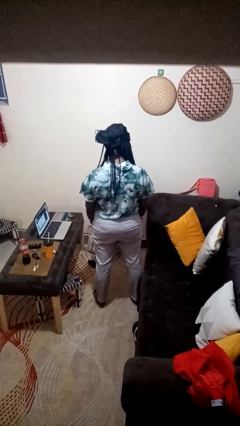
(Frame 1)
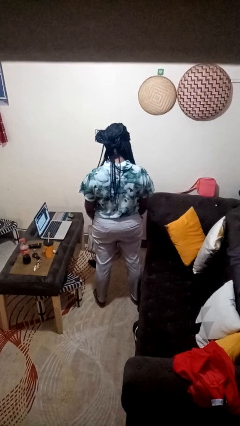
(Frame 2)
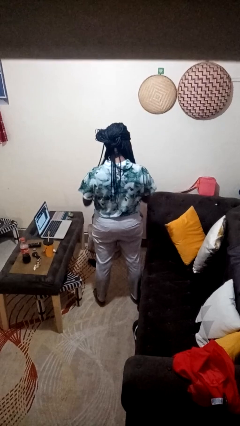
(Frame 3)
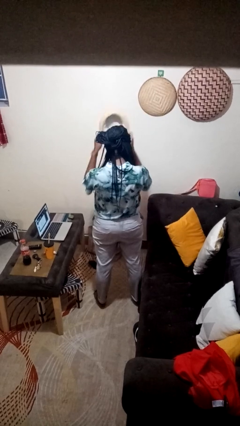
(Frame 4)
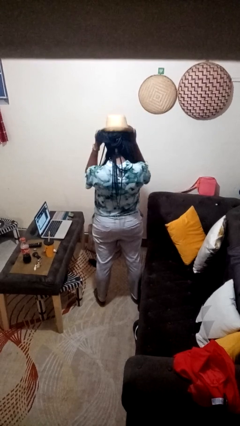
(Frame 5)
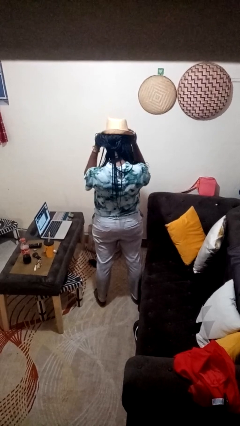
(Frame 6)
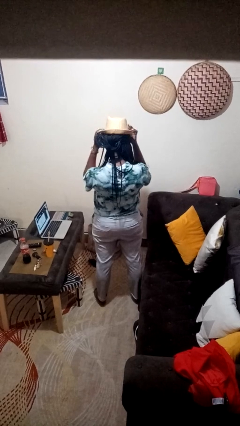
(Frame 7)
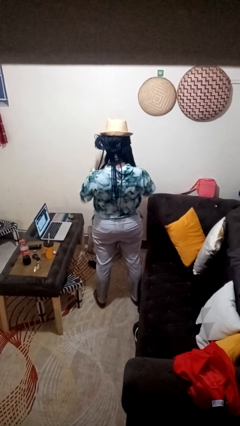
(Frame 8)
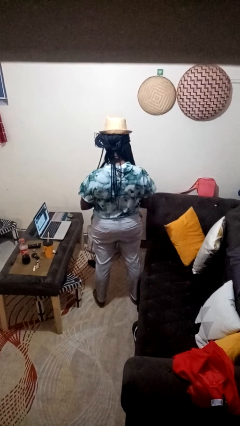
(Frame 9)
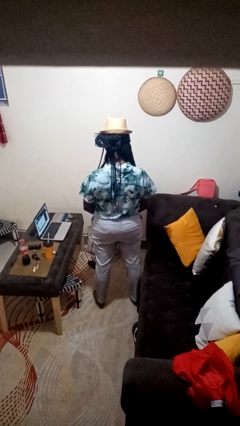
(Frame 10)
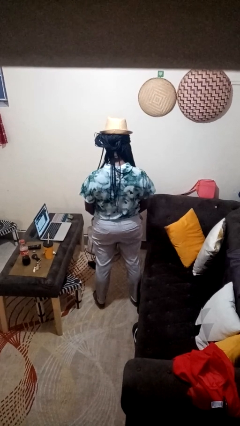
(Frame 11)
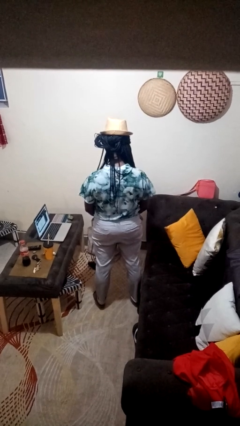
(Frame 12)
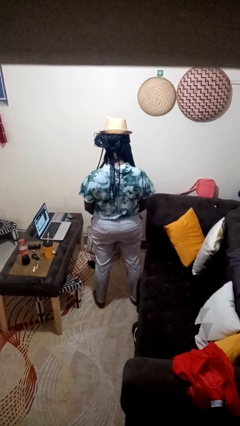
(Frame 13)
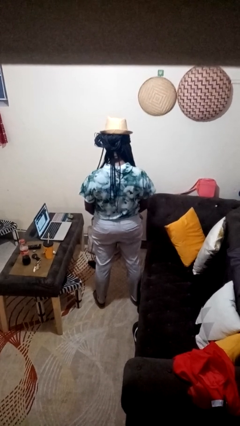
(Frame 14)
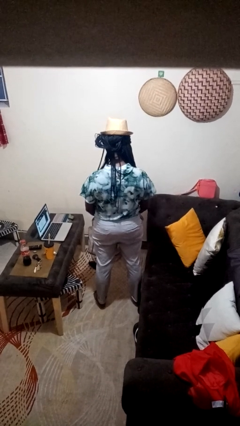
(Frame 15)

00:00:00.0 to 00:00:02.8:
person puts on hat

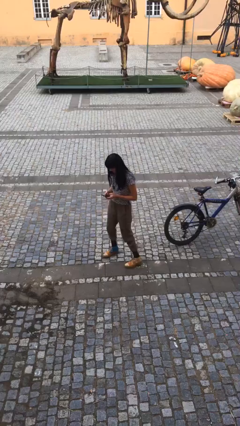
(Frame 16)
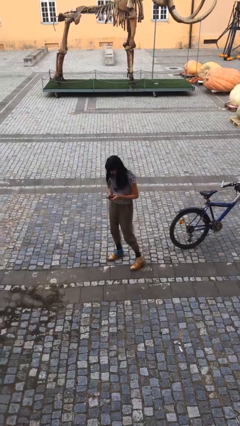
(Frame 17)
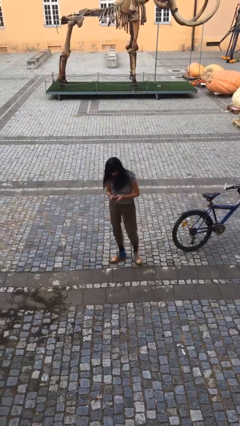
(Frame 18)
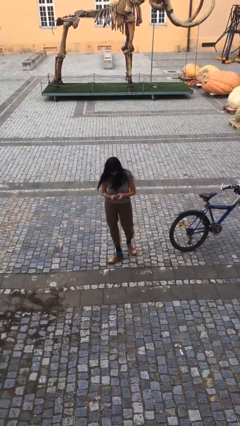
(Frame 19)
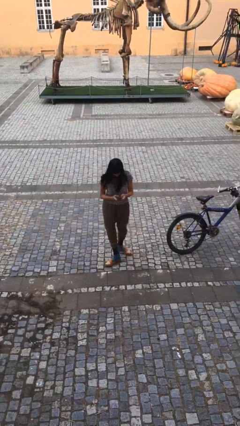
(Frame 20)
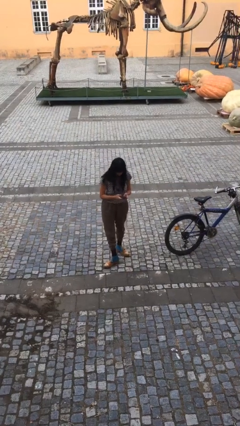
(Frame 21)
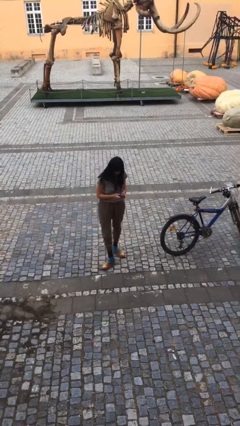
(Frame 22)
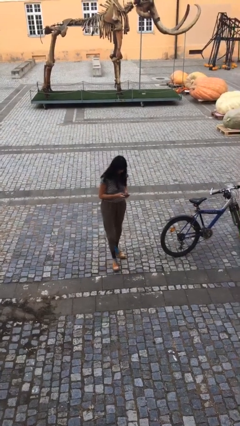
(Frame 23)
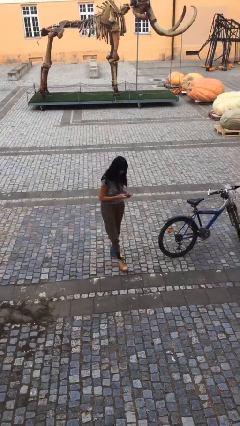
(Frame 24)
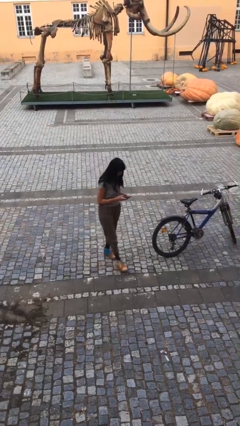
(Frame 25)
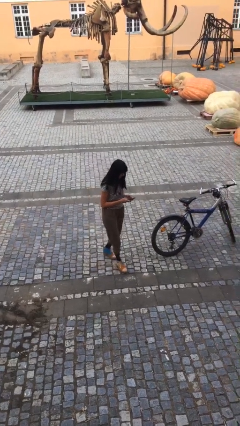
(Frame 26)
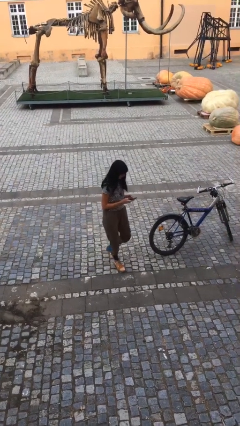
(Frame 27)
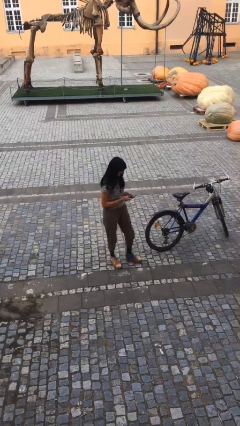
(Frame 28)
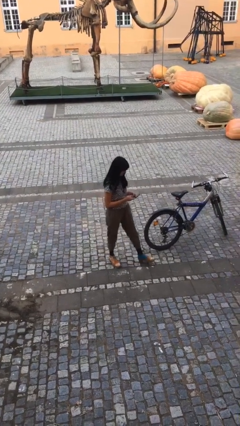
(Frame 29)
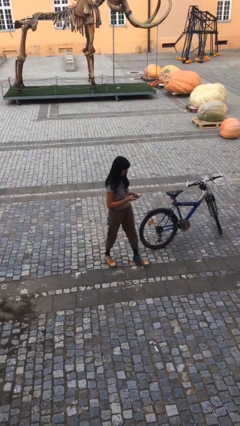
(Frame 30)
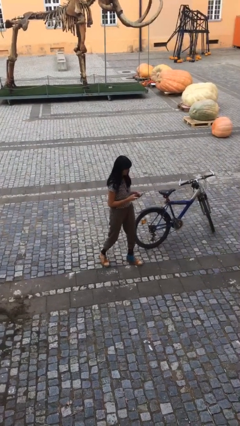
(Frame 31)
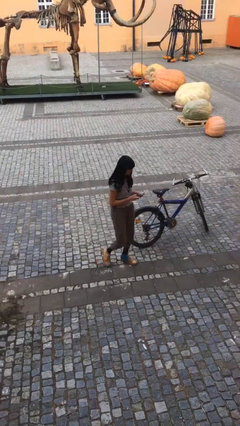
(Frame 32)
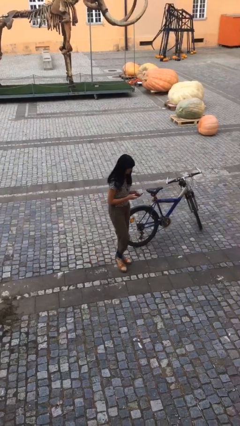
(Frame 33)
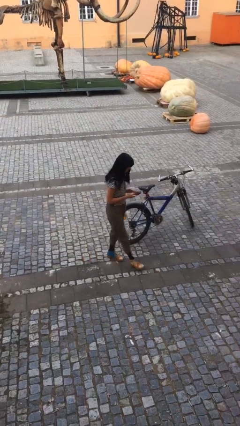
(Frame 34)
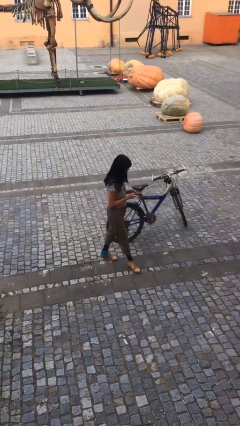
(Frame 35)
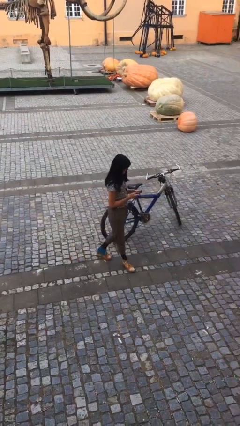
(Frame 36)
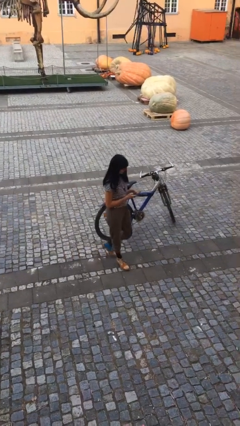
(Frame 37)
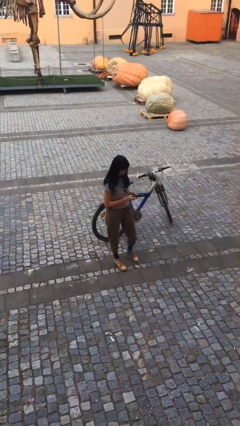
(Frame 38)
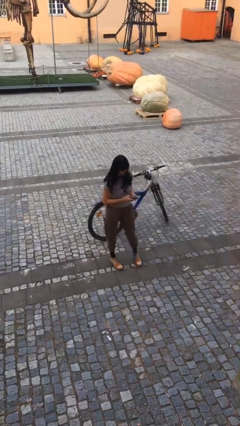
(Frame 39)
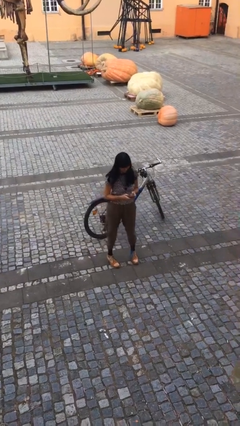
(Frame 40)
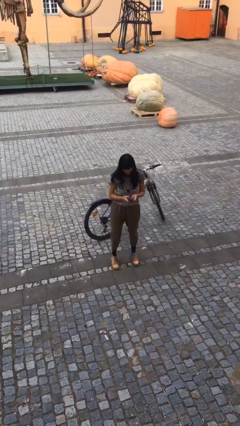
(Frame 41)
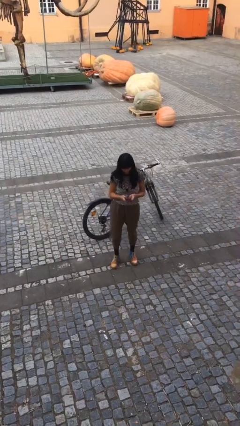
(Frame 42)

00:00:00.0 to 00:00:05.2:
person texts on phone

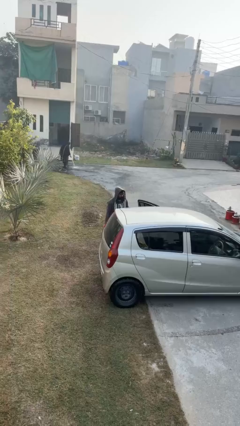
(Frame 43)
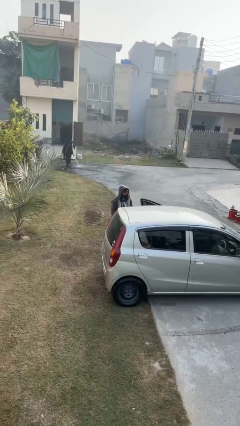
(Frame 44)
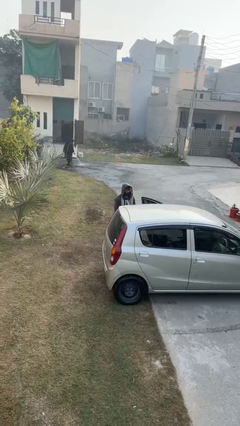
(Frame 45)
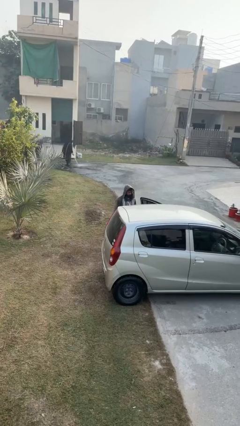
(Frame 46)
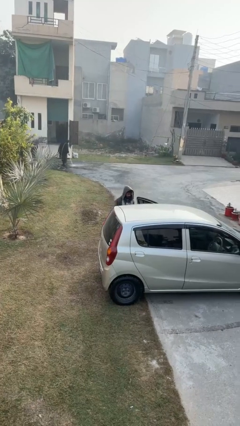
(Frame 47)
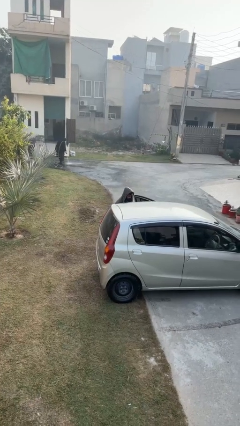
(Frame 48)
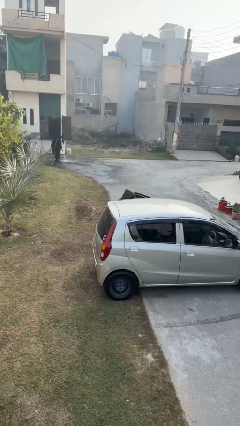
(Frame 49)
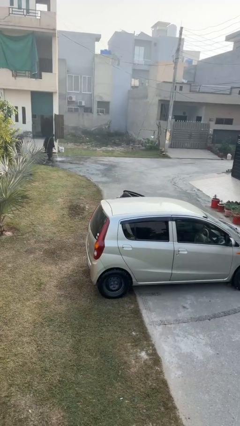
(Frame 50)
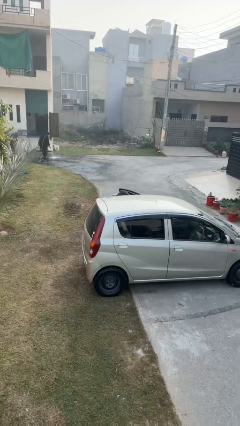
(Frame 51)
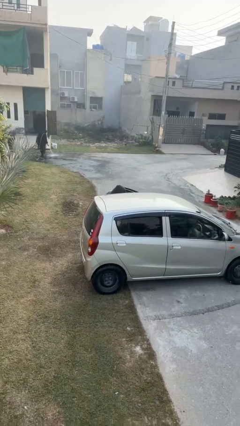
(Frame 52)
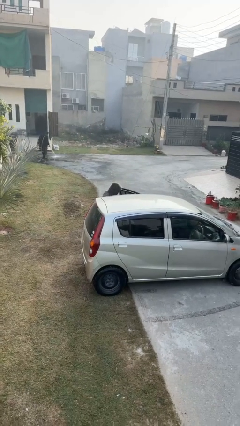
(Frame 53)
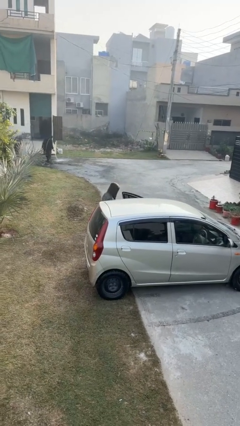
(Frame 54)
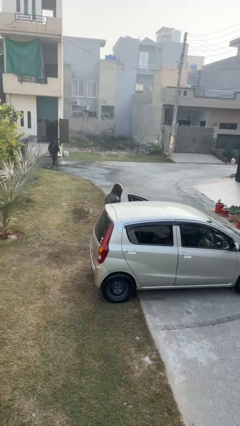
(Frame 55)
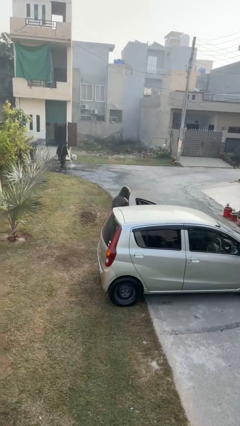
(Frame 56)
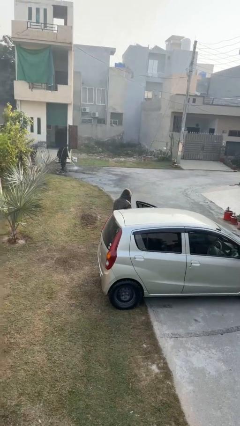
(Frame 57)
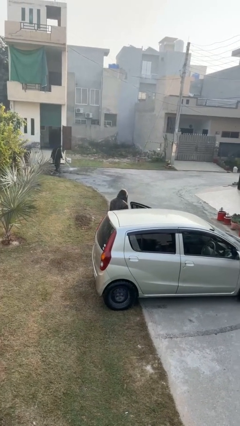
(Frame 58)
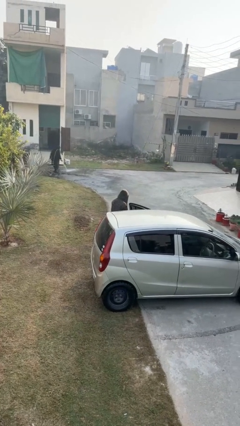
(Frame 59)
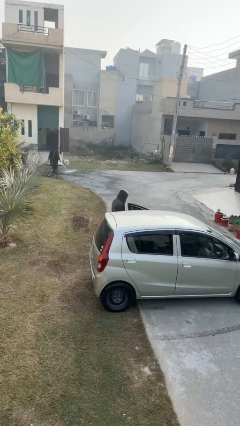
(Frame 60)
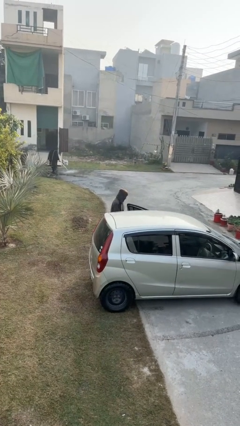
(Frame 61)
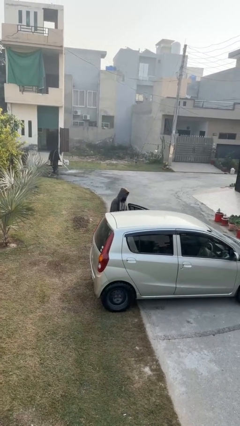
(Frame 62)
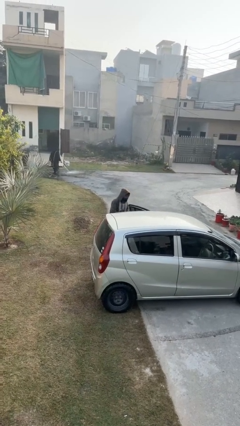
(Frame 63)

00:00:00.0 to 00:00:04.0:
person unloads car

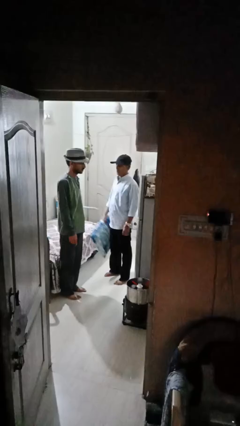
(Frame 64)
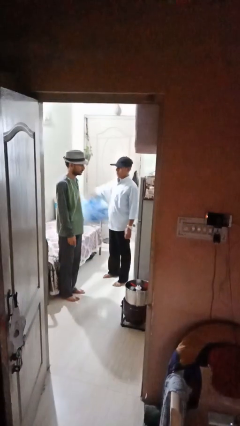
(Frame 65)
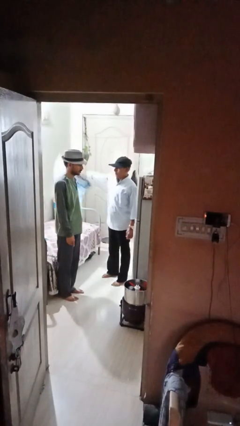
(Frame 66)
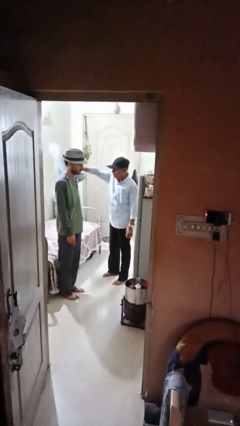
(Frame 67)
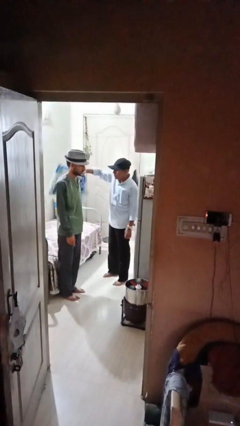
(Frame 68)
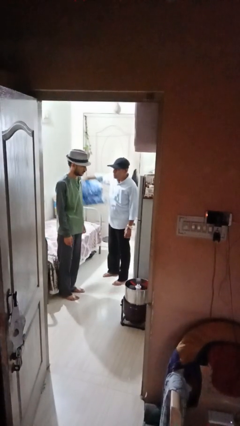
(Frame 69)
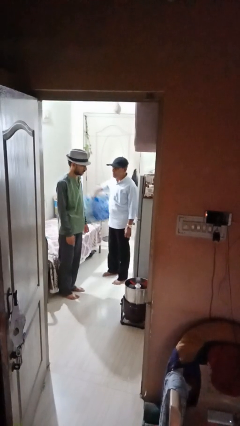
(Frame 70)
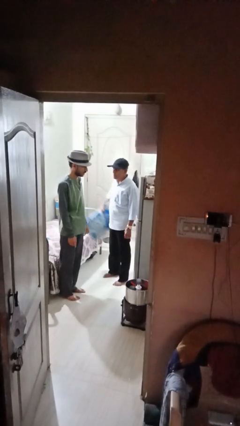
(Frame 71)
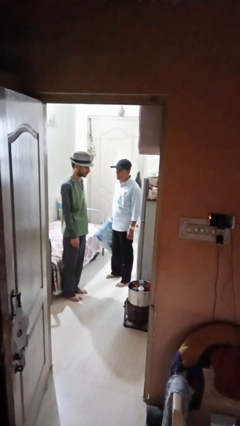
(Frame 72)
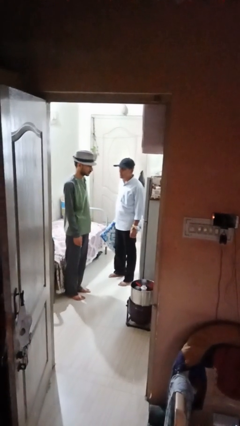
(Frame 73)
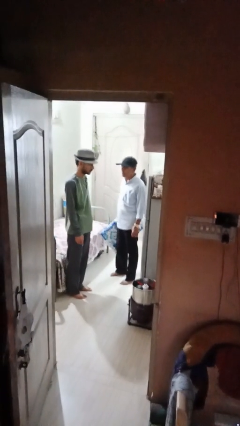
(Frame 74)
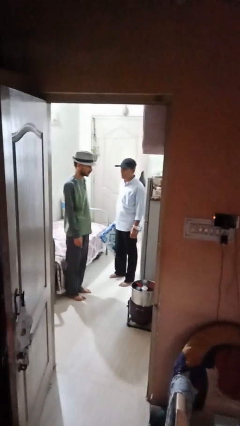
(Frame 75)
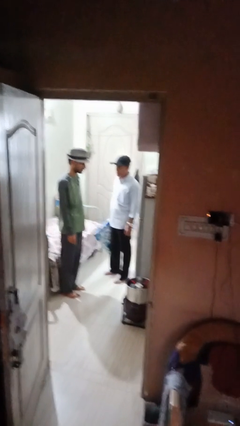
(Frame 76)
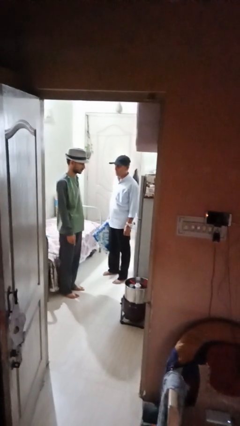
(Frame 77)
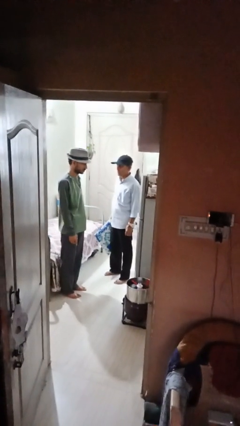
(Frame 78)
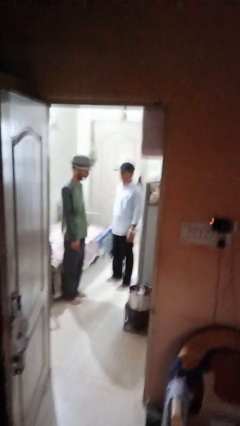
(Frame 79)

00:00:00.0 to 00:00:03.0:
person hits person with pillow

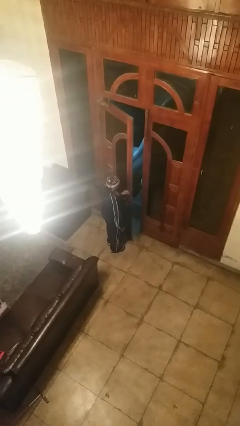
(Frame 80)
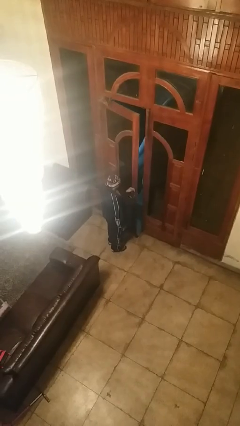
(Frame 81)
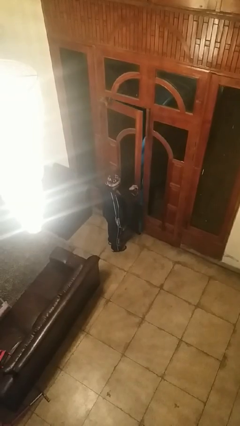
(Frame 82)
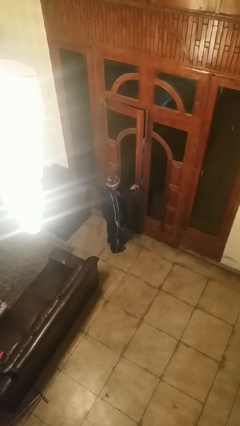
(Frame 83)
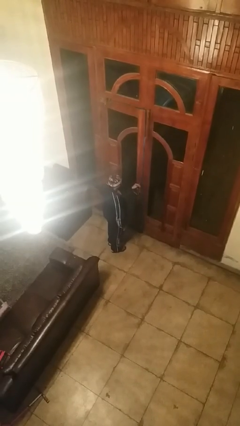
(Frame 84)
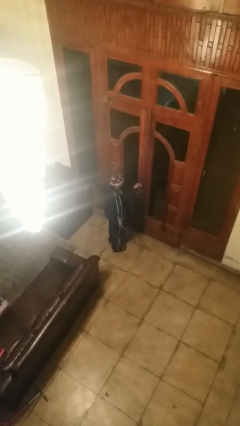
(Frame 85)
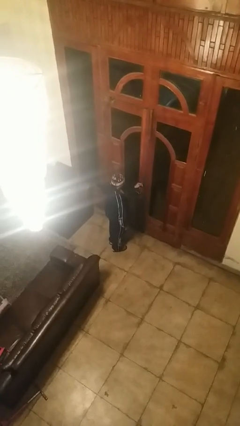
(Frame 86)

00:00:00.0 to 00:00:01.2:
person closes facility door

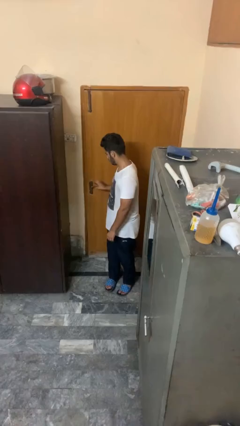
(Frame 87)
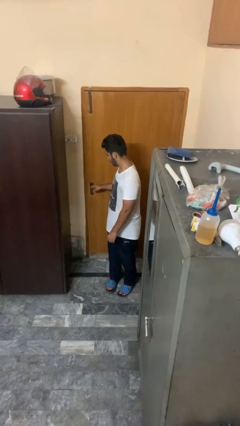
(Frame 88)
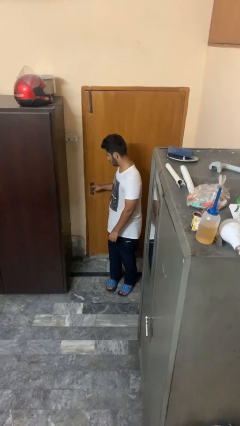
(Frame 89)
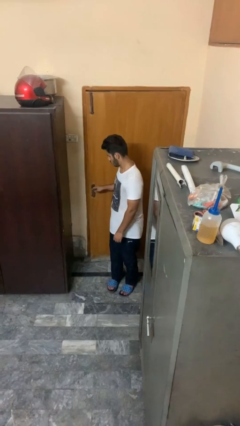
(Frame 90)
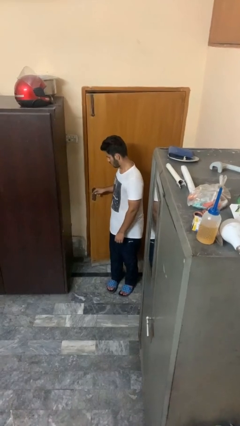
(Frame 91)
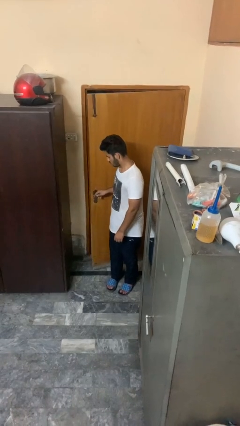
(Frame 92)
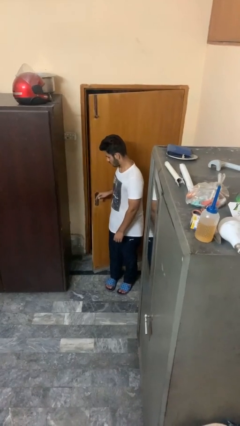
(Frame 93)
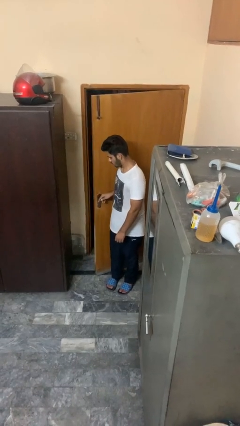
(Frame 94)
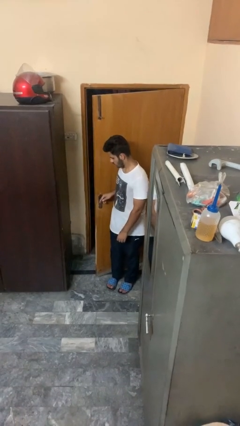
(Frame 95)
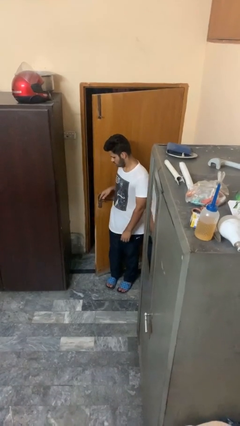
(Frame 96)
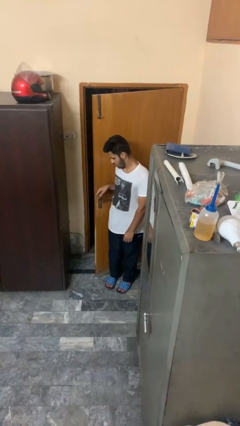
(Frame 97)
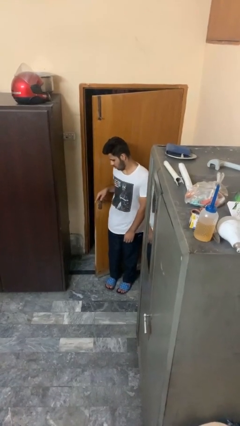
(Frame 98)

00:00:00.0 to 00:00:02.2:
person opens facility door
